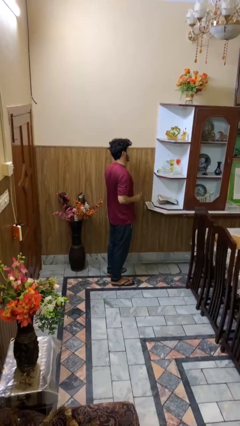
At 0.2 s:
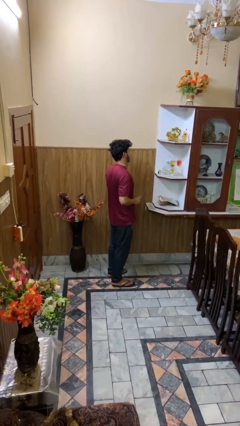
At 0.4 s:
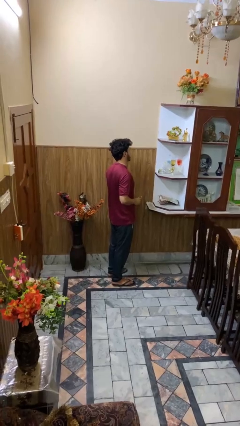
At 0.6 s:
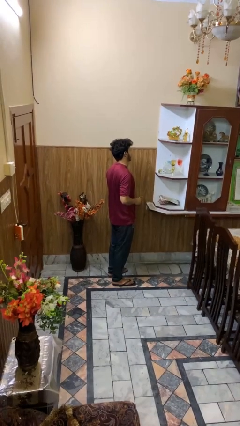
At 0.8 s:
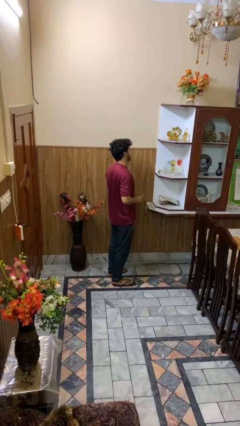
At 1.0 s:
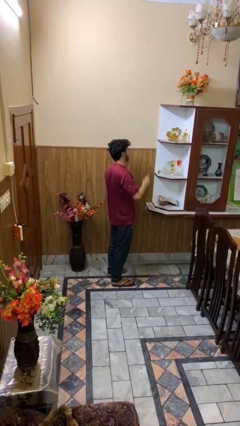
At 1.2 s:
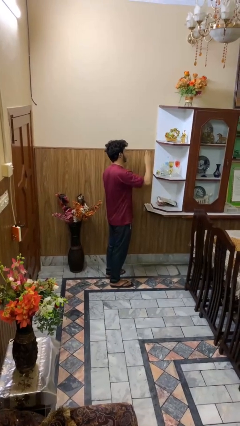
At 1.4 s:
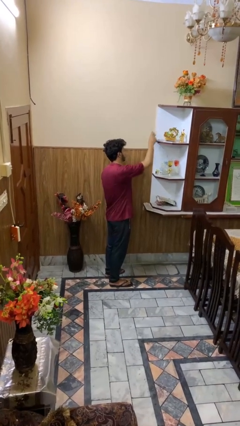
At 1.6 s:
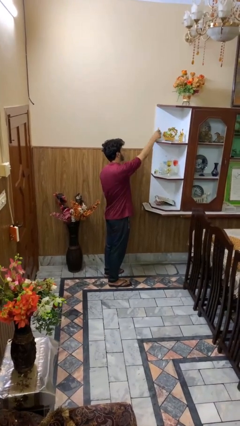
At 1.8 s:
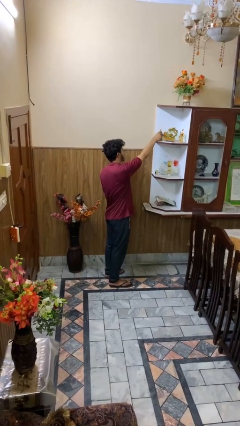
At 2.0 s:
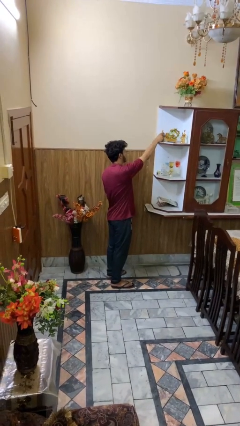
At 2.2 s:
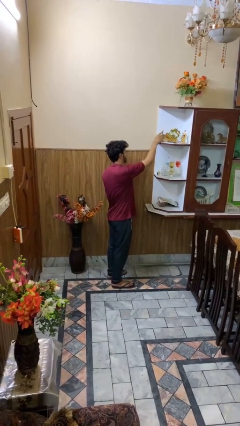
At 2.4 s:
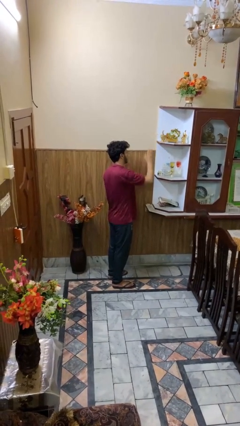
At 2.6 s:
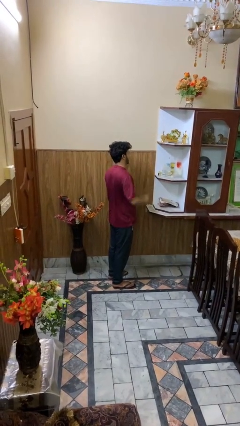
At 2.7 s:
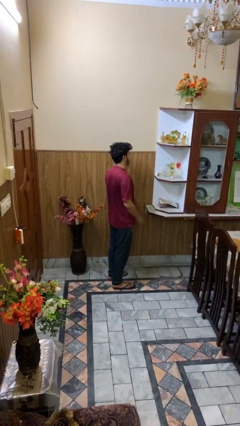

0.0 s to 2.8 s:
person puts down object on shelf

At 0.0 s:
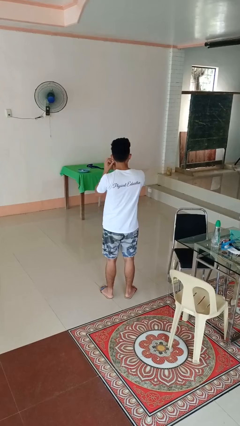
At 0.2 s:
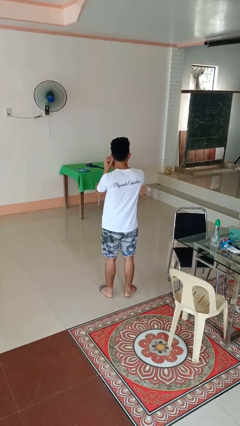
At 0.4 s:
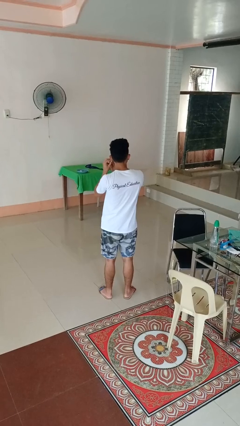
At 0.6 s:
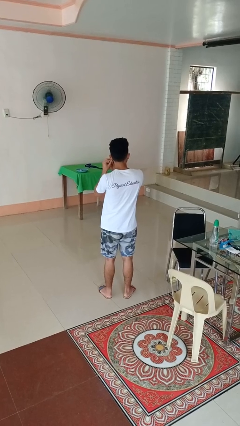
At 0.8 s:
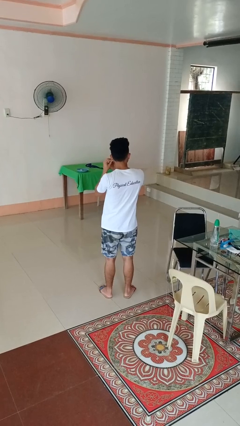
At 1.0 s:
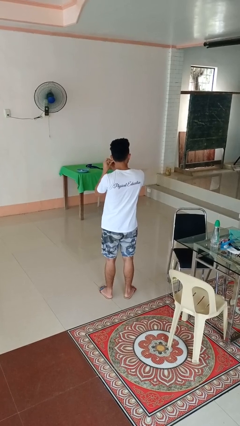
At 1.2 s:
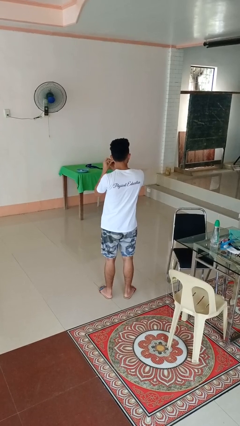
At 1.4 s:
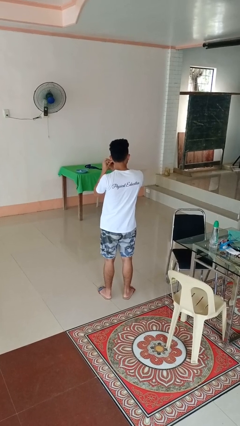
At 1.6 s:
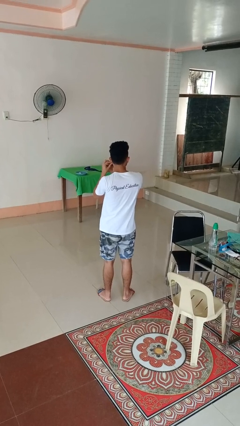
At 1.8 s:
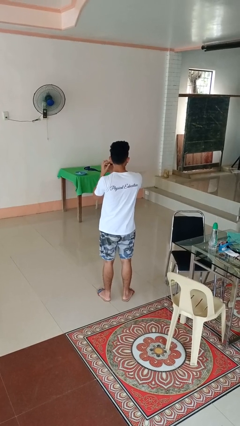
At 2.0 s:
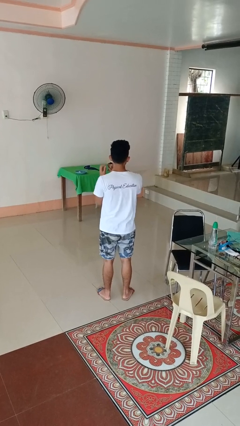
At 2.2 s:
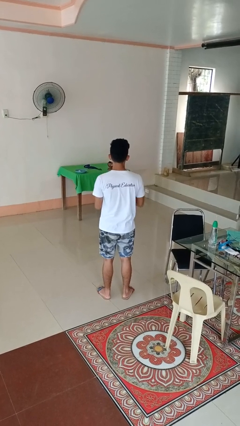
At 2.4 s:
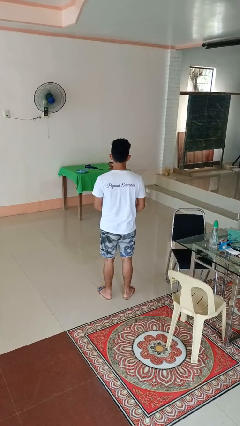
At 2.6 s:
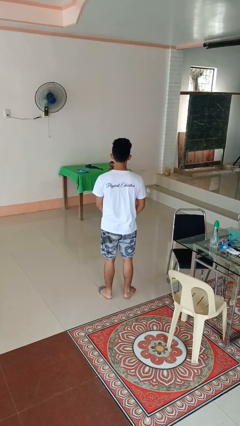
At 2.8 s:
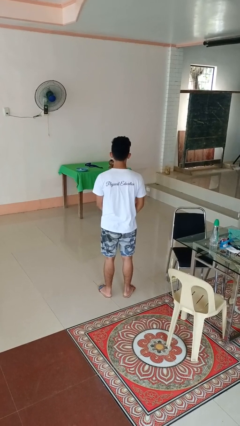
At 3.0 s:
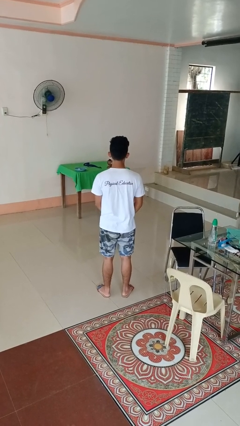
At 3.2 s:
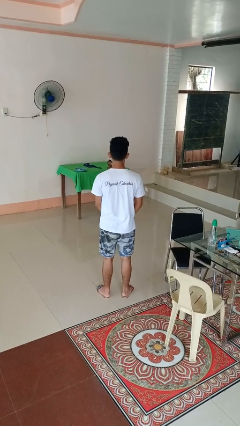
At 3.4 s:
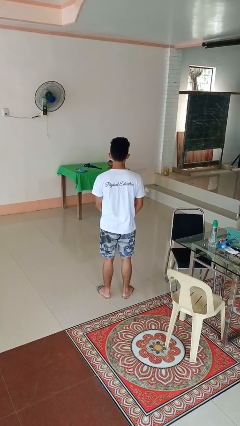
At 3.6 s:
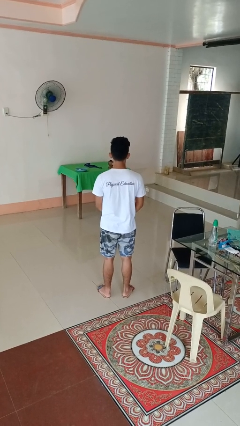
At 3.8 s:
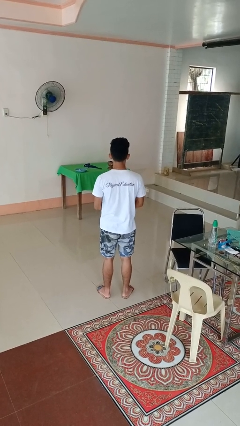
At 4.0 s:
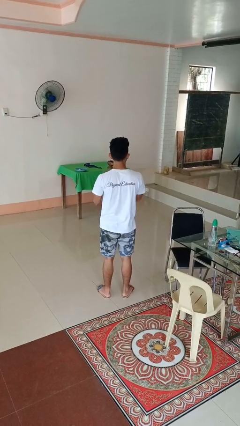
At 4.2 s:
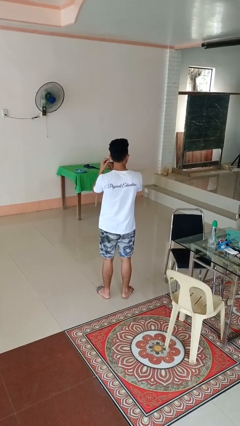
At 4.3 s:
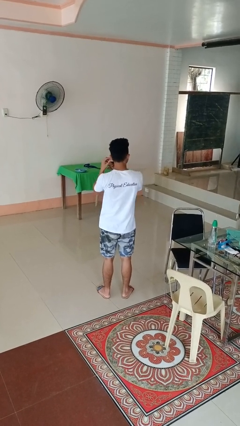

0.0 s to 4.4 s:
person puts on earrings

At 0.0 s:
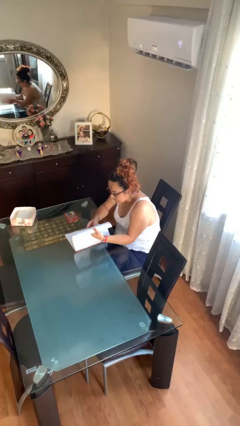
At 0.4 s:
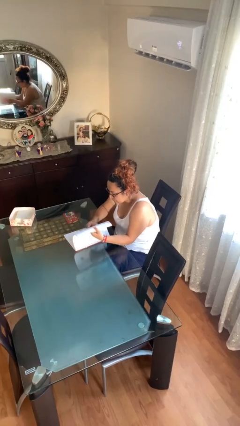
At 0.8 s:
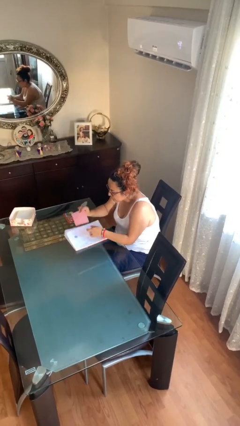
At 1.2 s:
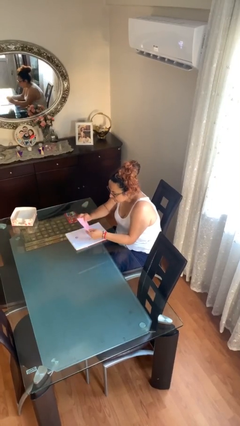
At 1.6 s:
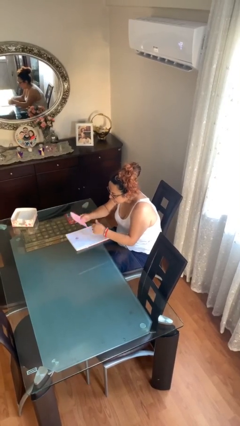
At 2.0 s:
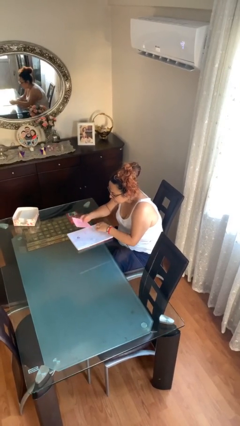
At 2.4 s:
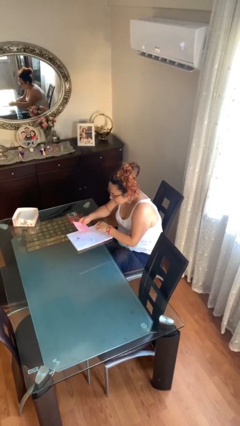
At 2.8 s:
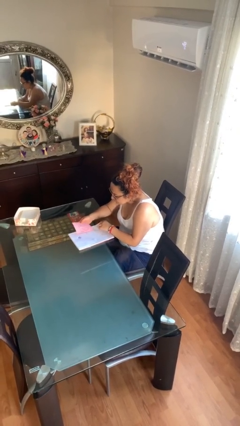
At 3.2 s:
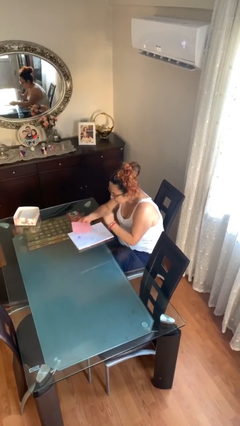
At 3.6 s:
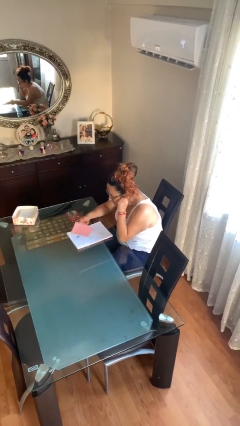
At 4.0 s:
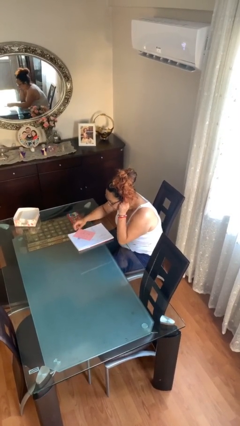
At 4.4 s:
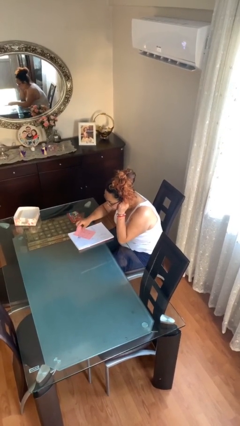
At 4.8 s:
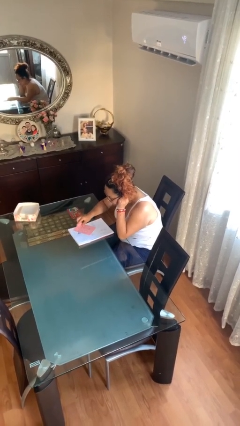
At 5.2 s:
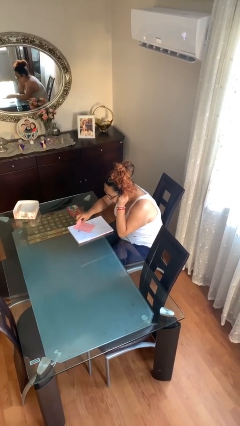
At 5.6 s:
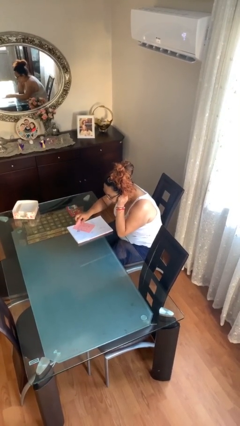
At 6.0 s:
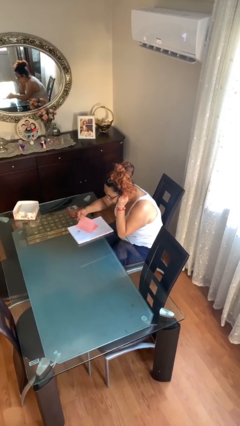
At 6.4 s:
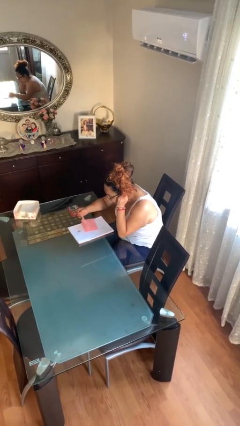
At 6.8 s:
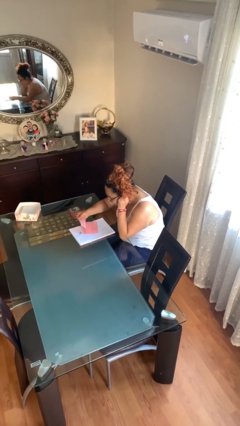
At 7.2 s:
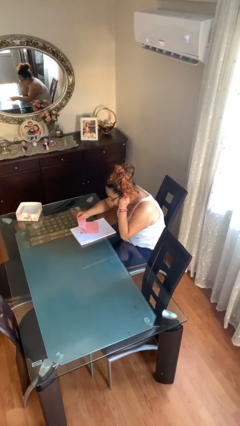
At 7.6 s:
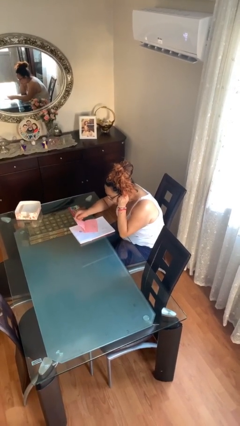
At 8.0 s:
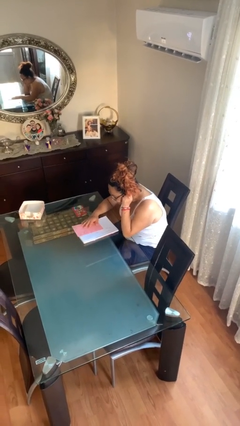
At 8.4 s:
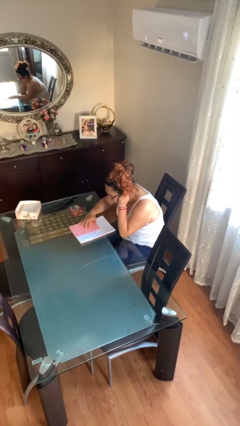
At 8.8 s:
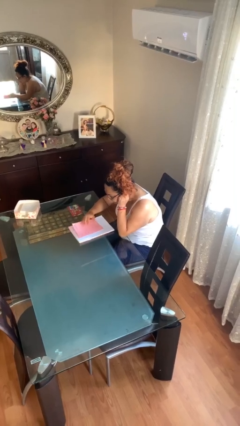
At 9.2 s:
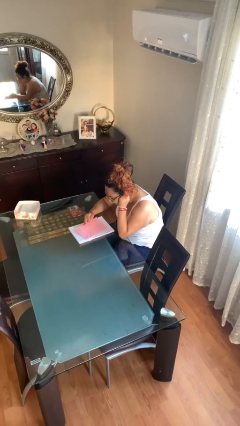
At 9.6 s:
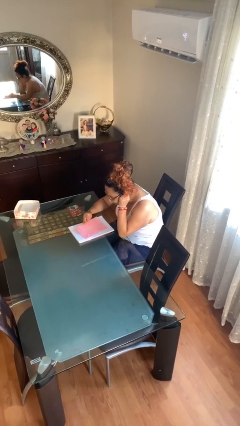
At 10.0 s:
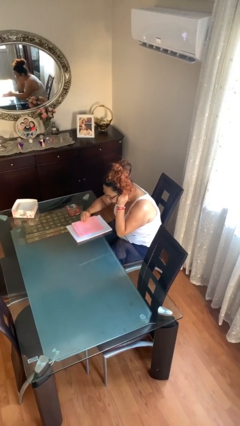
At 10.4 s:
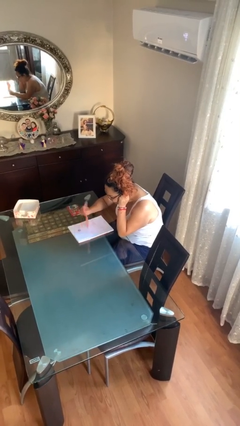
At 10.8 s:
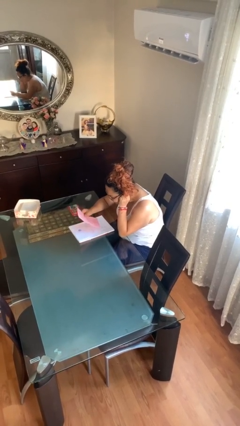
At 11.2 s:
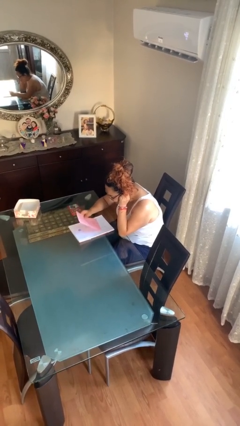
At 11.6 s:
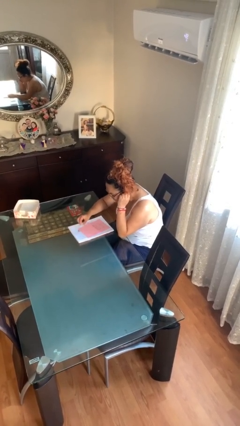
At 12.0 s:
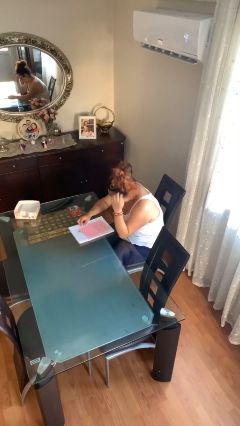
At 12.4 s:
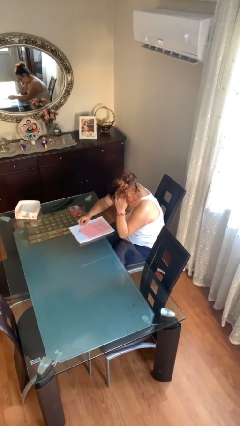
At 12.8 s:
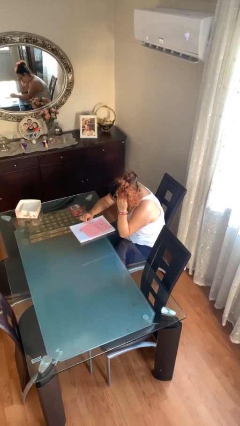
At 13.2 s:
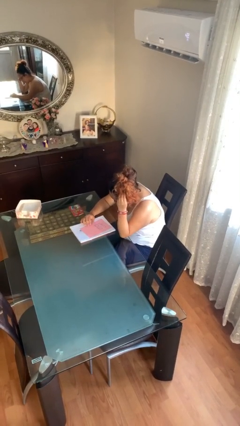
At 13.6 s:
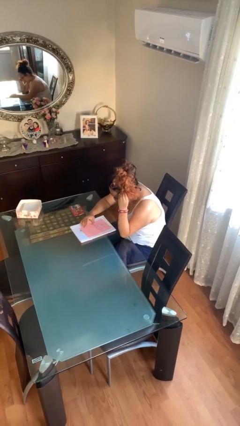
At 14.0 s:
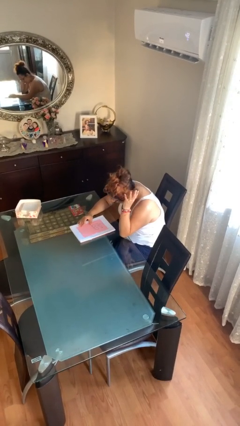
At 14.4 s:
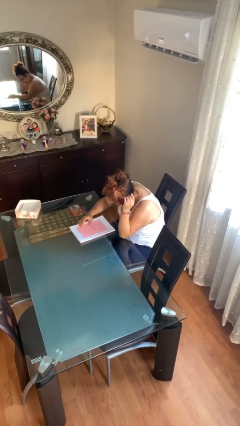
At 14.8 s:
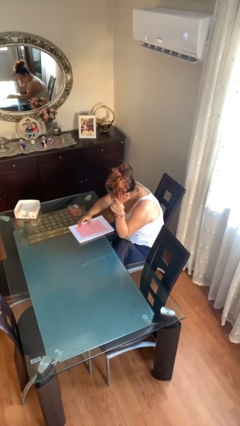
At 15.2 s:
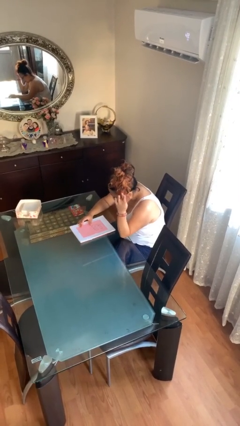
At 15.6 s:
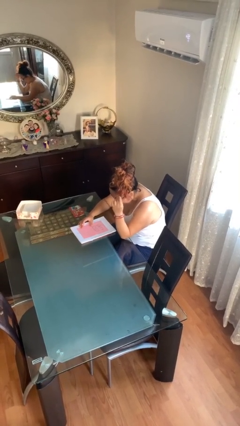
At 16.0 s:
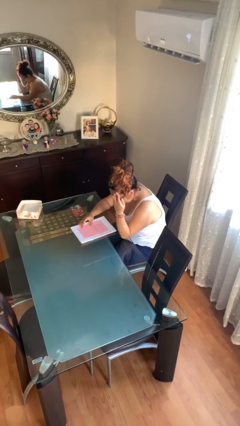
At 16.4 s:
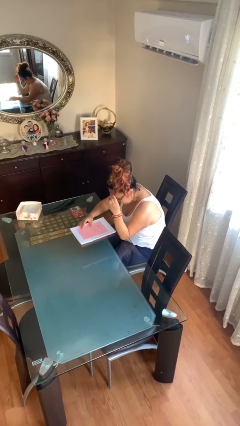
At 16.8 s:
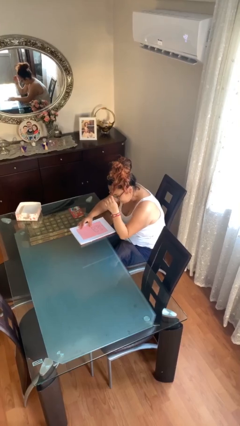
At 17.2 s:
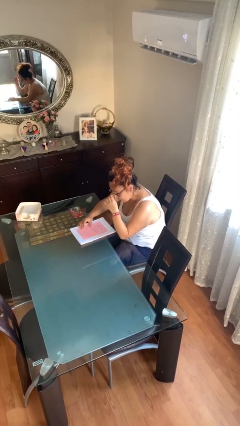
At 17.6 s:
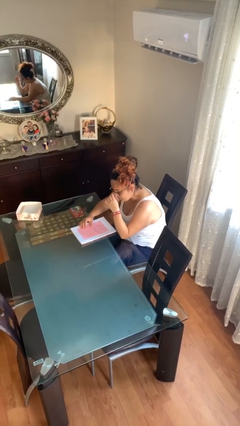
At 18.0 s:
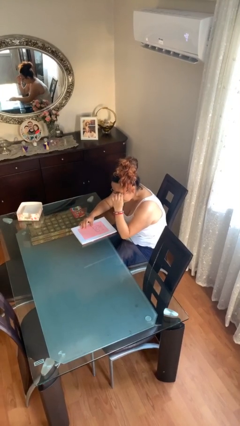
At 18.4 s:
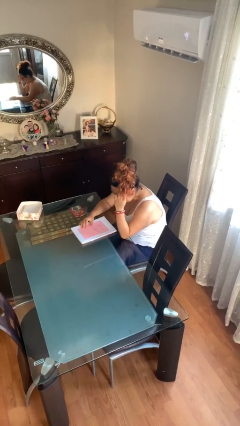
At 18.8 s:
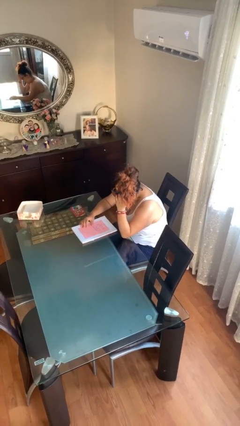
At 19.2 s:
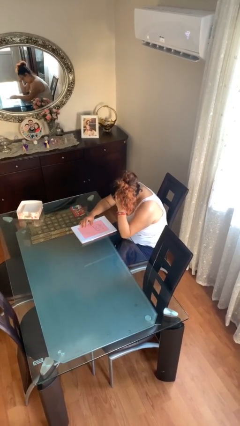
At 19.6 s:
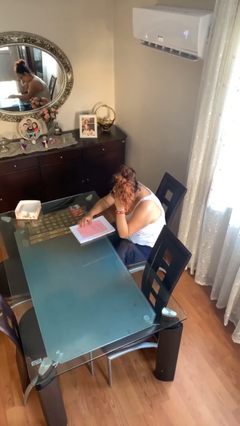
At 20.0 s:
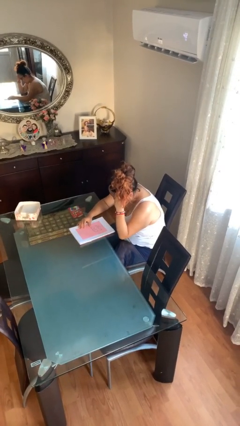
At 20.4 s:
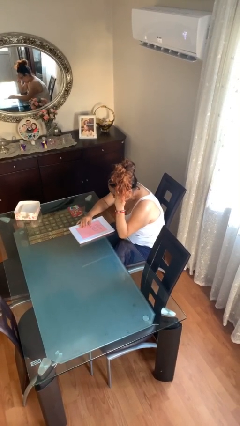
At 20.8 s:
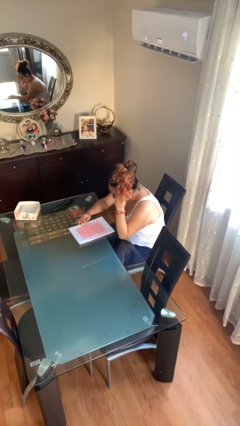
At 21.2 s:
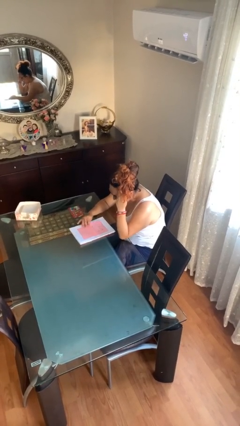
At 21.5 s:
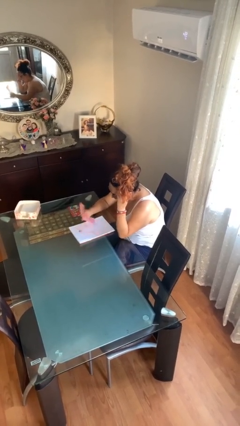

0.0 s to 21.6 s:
person reads document
